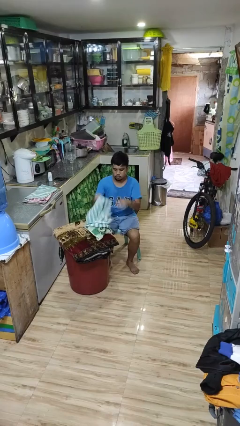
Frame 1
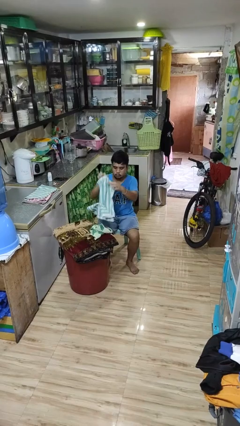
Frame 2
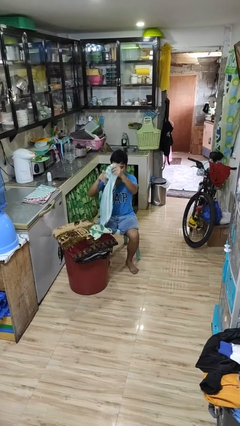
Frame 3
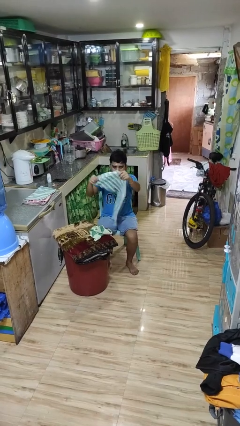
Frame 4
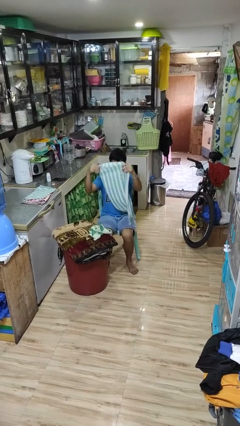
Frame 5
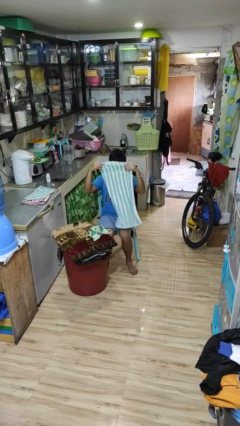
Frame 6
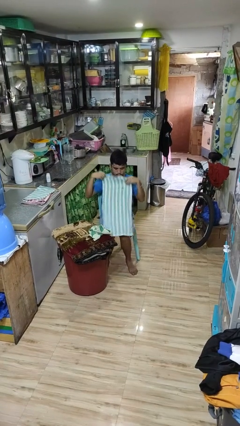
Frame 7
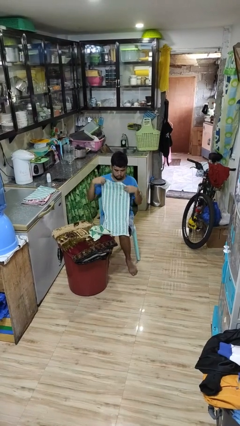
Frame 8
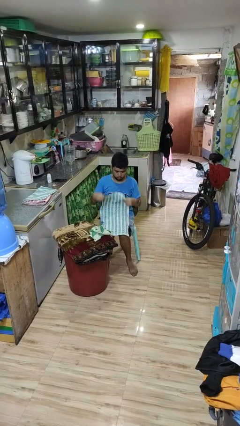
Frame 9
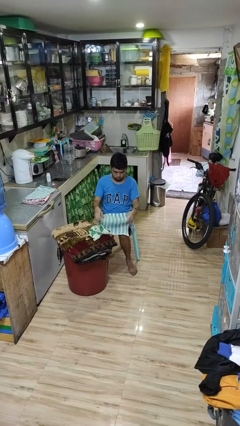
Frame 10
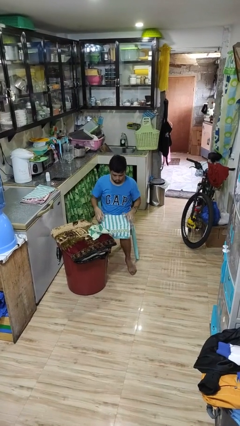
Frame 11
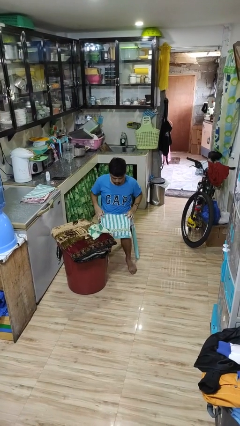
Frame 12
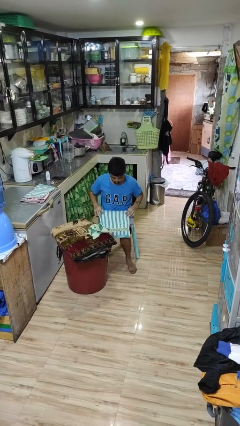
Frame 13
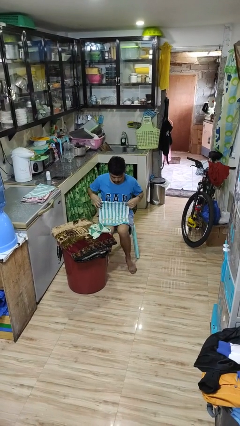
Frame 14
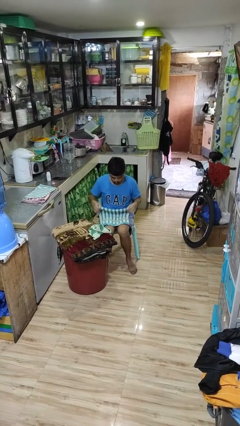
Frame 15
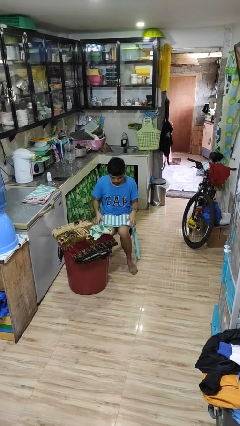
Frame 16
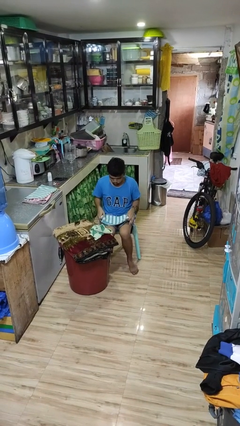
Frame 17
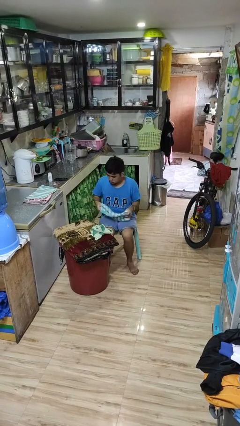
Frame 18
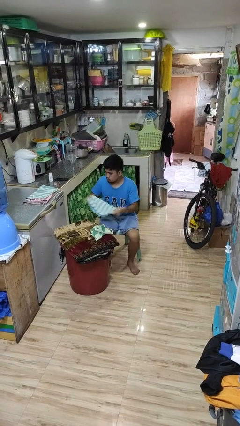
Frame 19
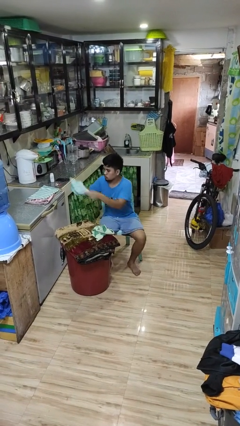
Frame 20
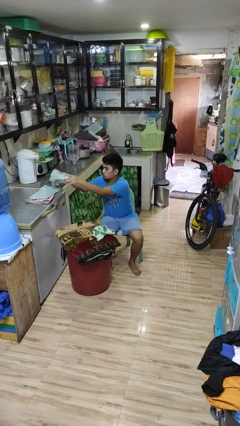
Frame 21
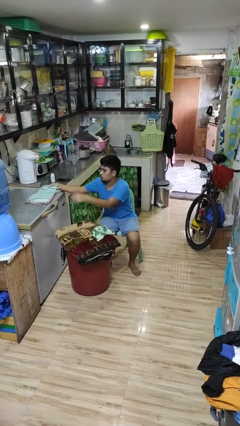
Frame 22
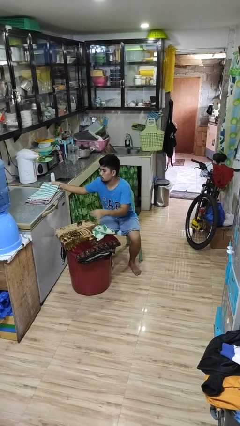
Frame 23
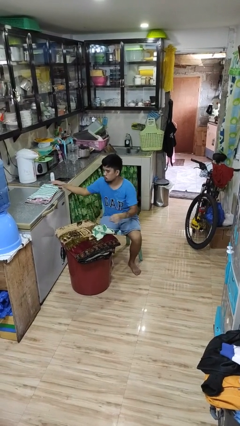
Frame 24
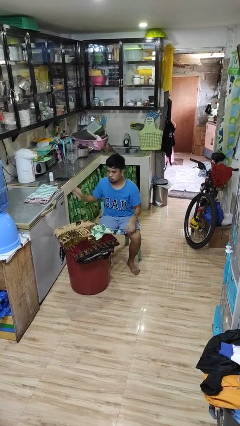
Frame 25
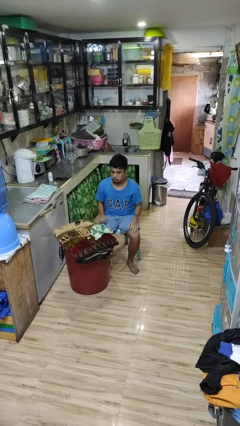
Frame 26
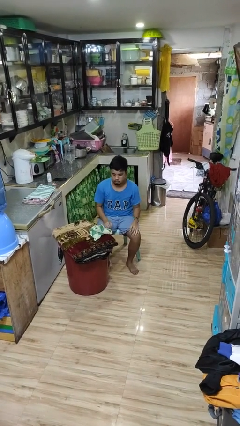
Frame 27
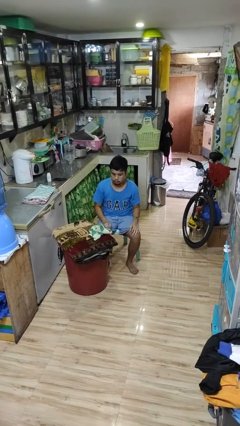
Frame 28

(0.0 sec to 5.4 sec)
person folds towel

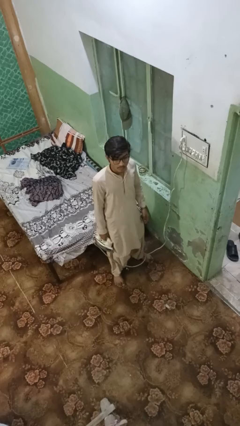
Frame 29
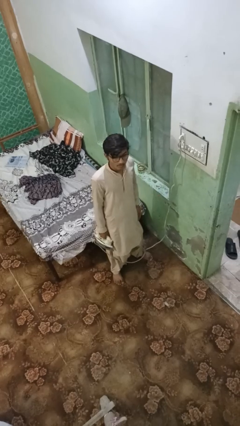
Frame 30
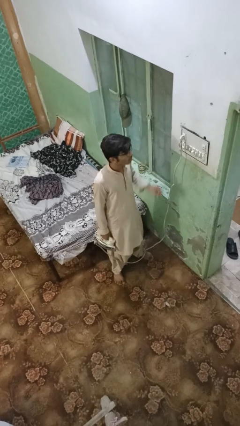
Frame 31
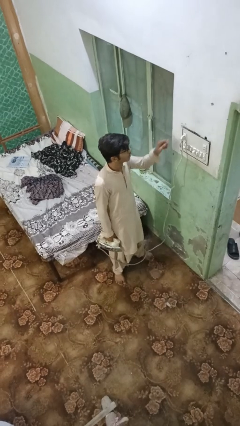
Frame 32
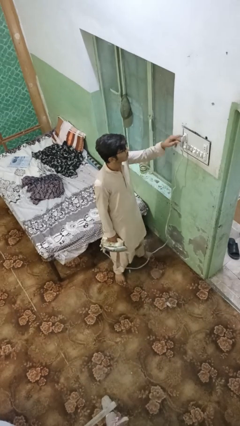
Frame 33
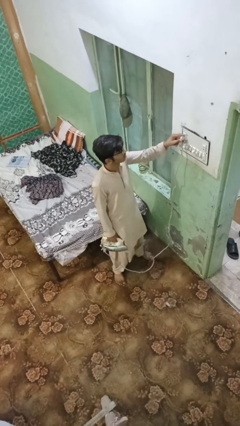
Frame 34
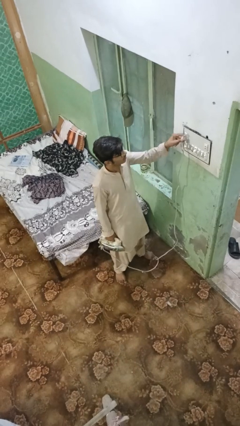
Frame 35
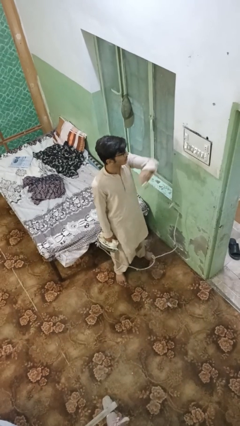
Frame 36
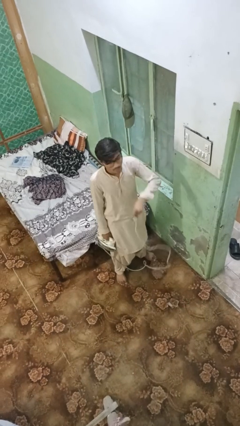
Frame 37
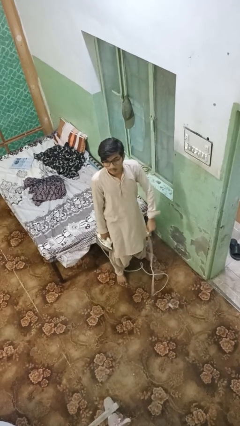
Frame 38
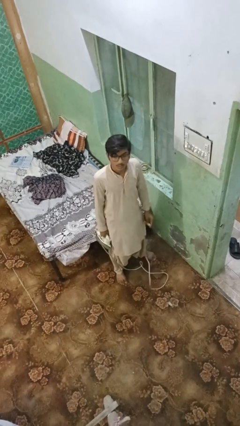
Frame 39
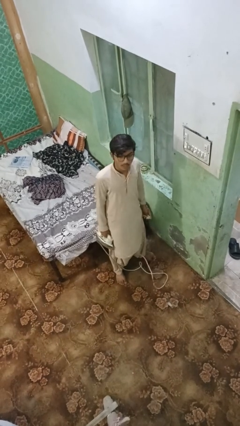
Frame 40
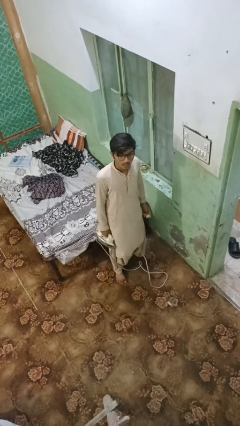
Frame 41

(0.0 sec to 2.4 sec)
person unplugs from electrical socket

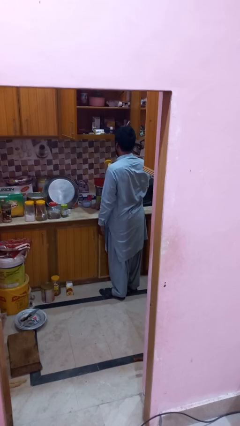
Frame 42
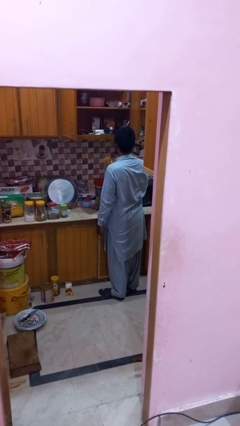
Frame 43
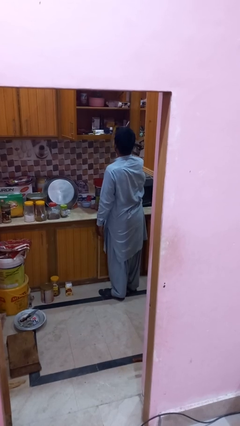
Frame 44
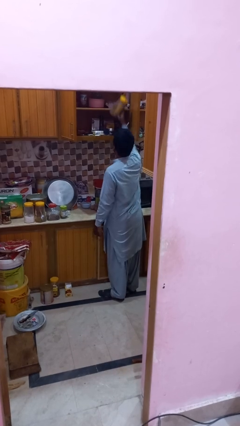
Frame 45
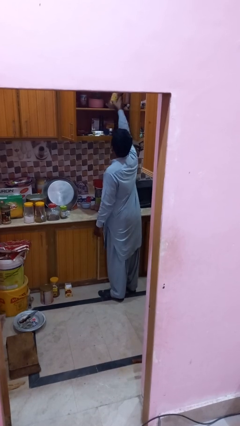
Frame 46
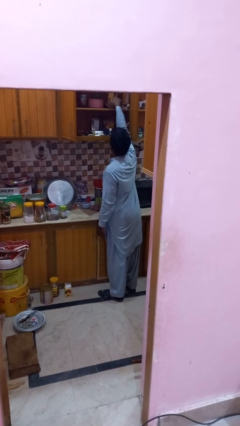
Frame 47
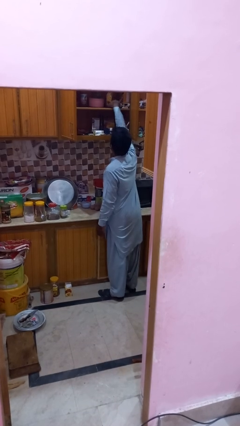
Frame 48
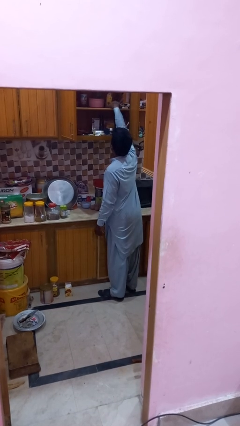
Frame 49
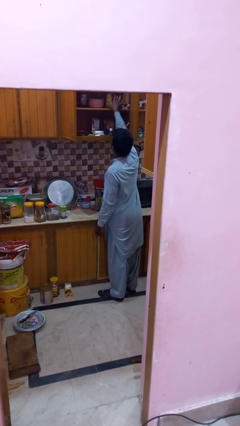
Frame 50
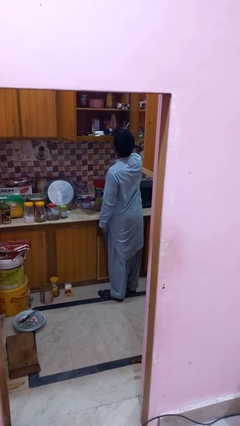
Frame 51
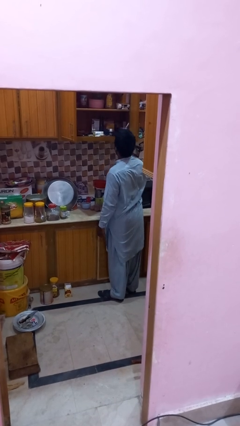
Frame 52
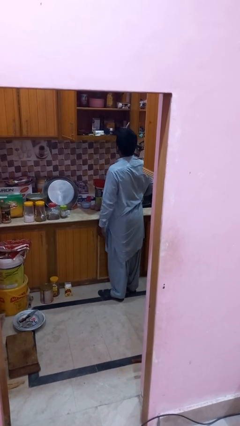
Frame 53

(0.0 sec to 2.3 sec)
person puts object in cabinet

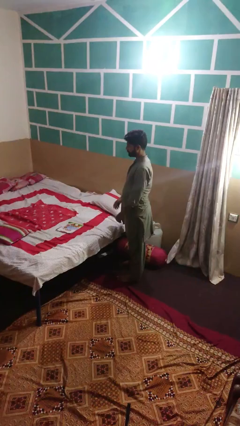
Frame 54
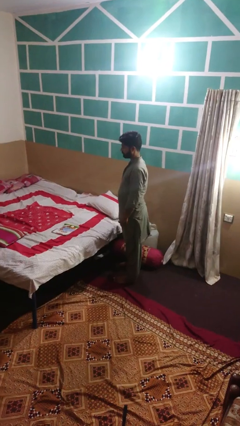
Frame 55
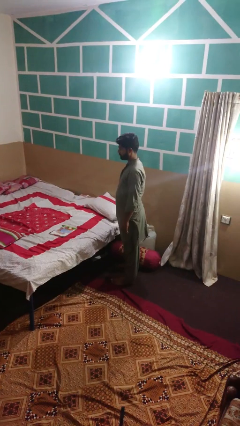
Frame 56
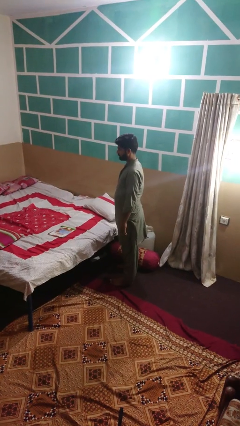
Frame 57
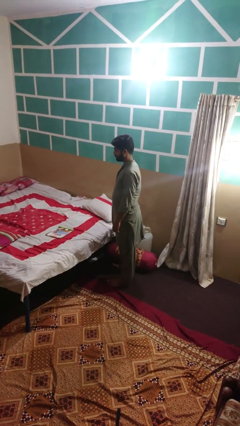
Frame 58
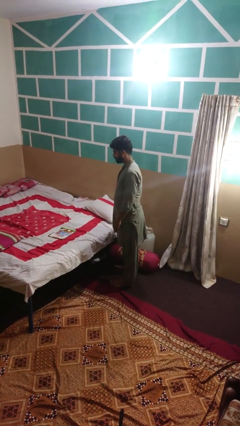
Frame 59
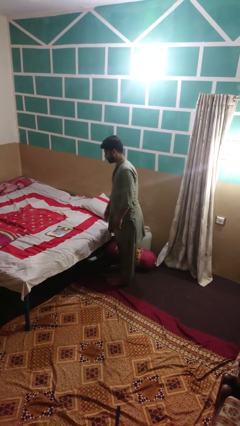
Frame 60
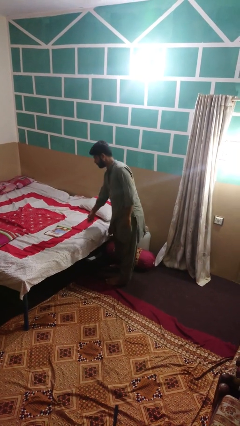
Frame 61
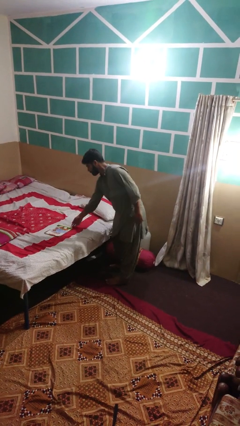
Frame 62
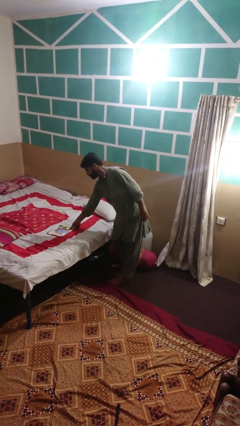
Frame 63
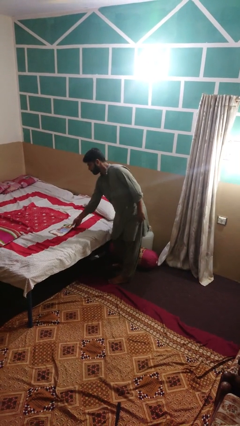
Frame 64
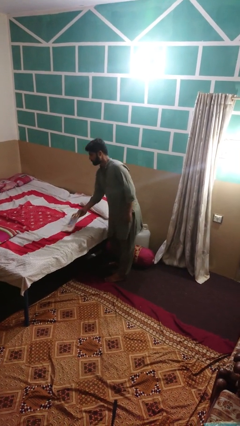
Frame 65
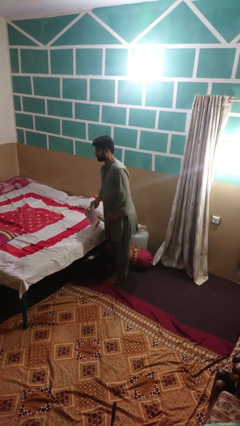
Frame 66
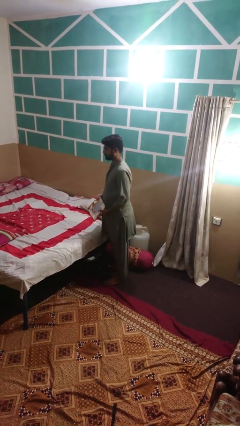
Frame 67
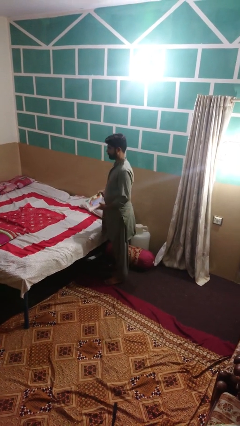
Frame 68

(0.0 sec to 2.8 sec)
person picks up object from bed

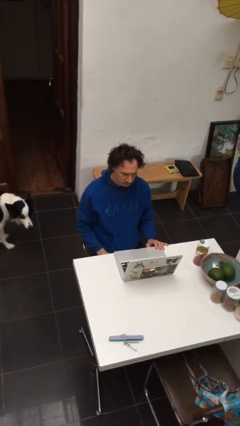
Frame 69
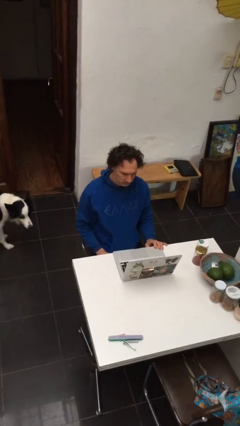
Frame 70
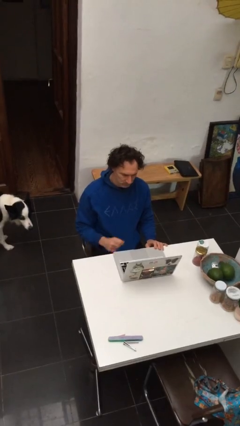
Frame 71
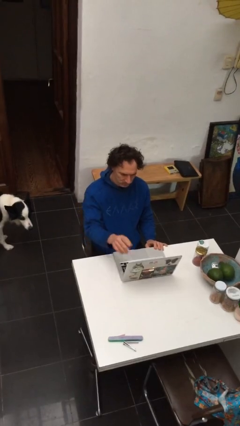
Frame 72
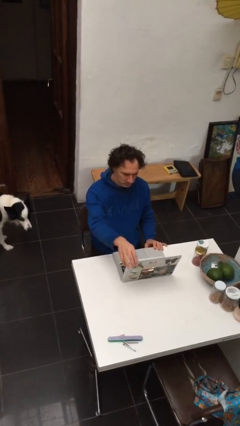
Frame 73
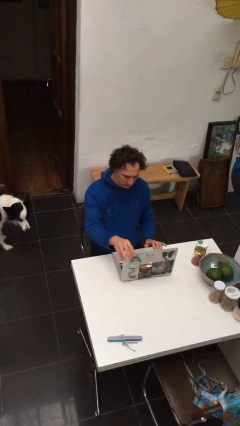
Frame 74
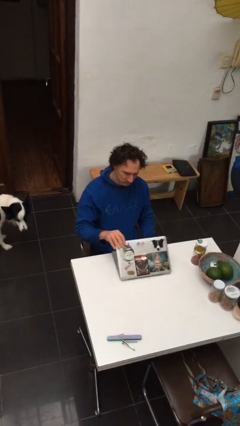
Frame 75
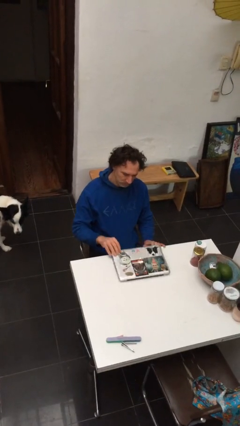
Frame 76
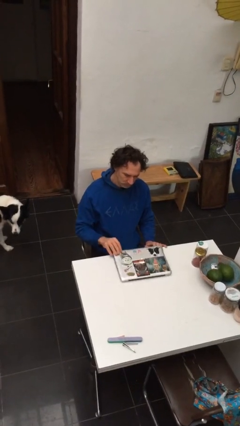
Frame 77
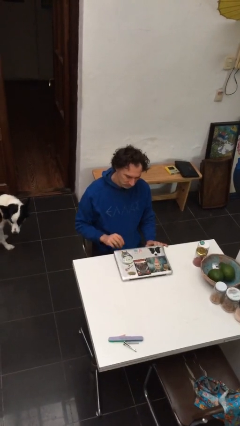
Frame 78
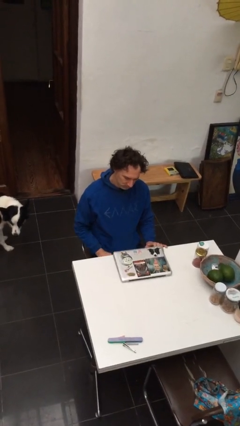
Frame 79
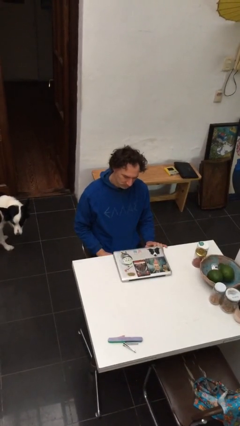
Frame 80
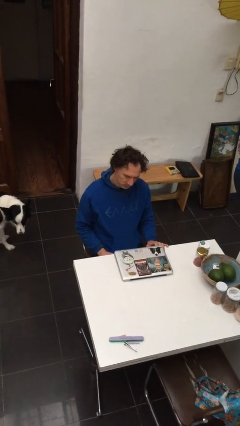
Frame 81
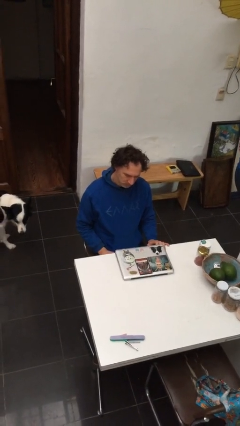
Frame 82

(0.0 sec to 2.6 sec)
person closes laptop

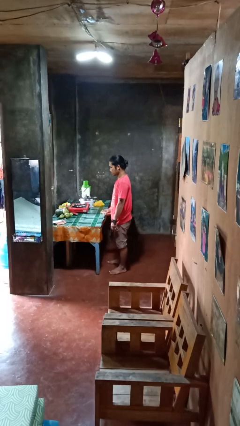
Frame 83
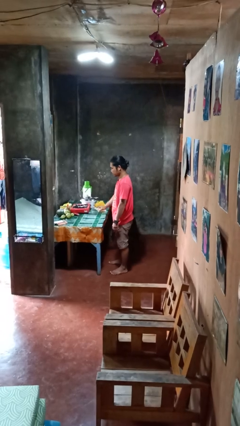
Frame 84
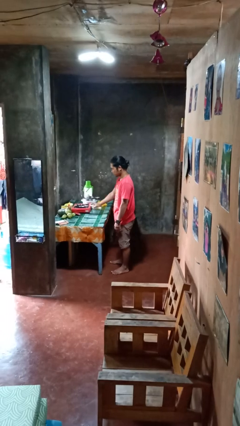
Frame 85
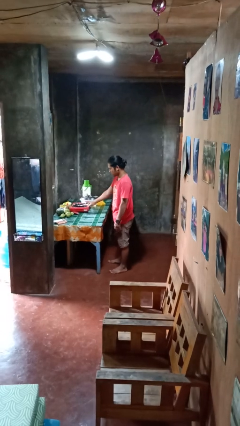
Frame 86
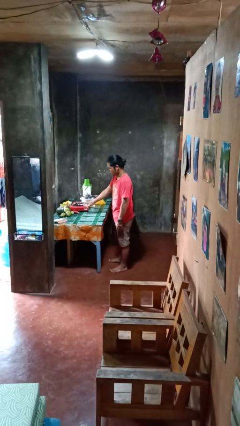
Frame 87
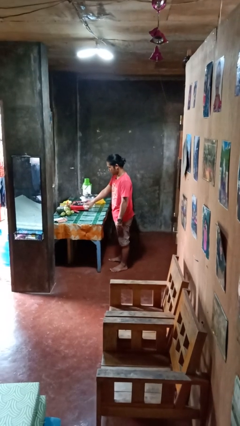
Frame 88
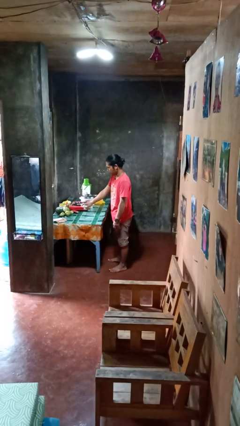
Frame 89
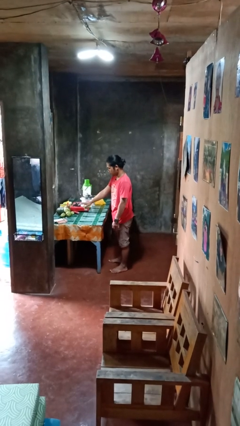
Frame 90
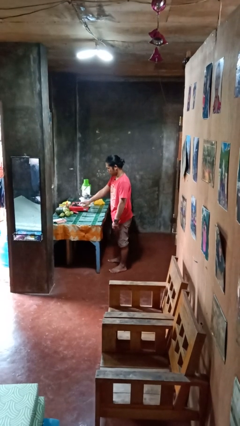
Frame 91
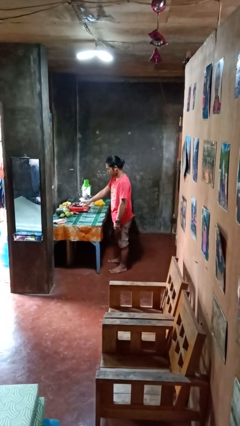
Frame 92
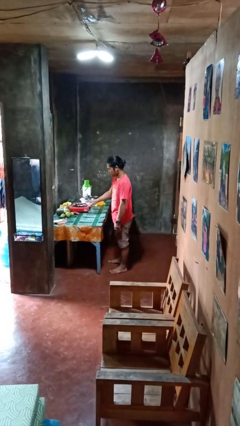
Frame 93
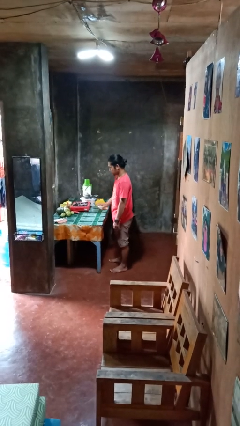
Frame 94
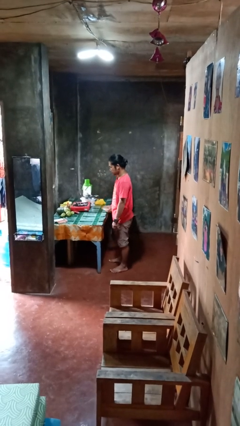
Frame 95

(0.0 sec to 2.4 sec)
person sprays from bottle
